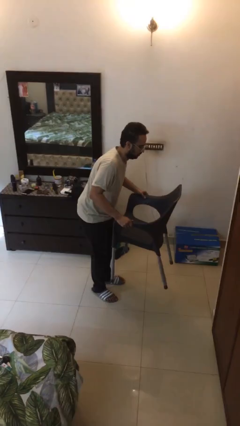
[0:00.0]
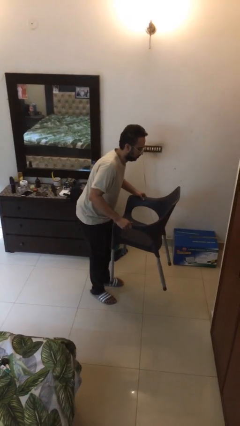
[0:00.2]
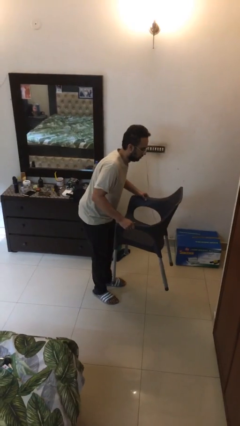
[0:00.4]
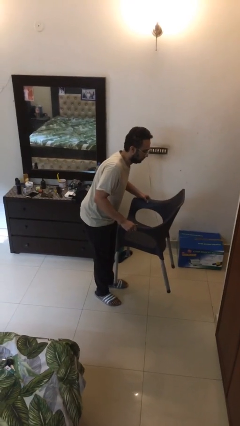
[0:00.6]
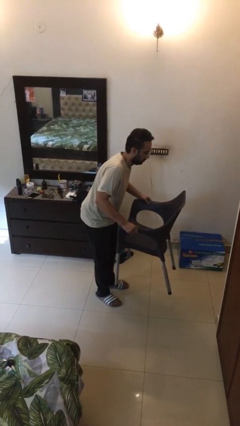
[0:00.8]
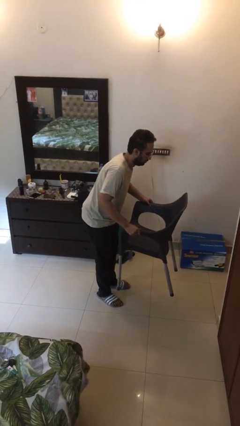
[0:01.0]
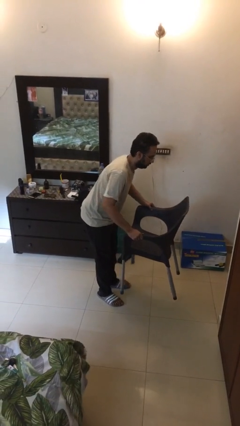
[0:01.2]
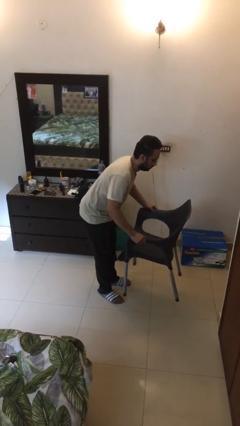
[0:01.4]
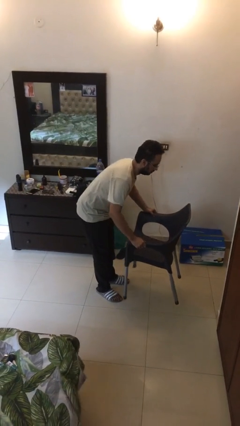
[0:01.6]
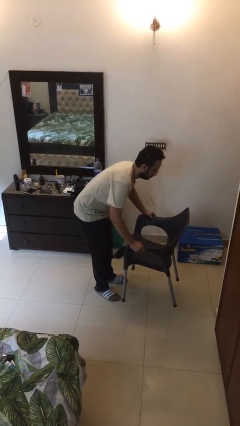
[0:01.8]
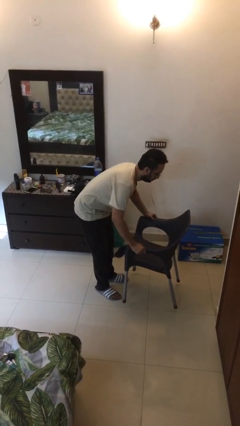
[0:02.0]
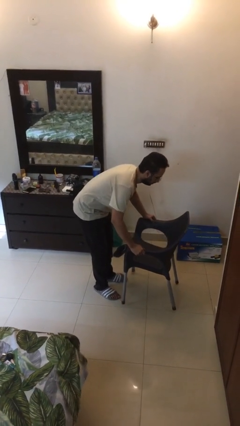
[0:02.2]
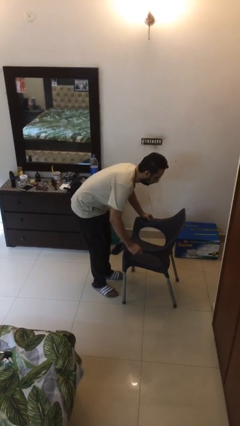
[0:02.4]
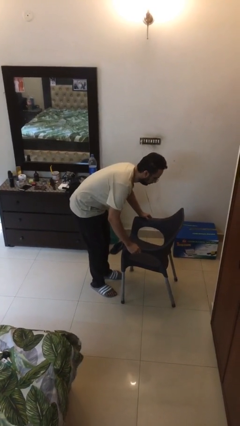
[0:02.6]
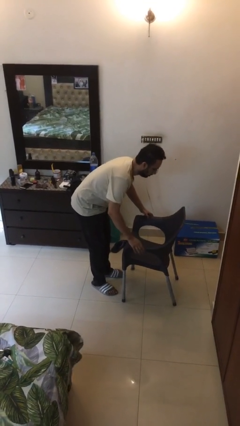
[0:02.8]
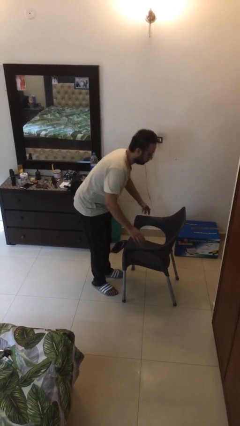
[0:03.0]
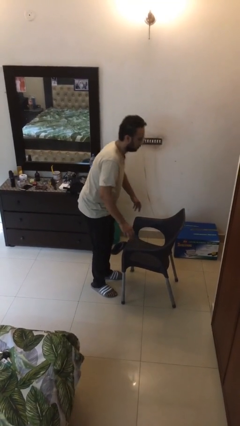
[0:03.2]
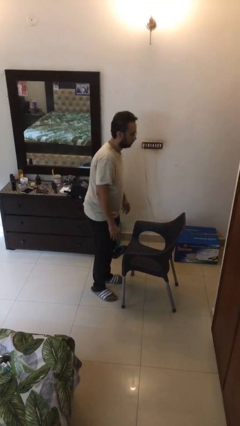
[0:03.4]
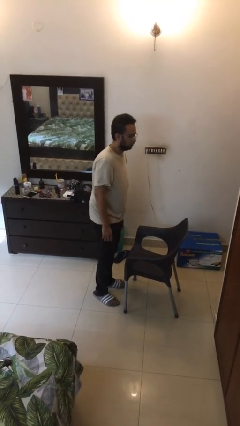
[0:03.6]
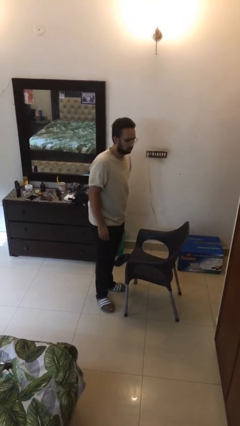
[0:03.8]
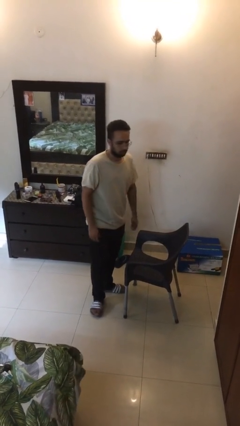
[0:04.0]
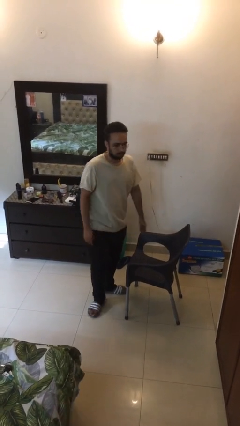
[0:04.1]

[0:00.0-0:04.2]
person puts down object on floor

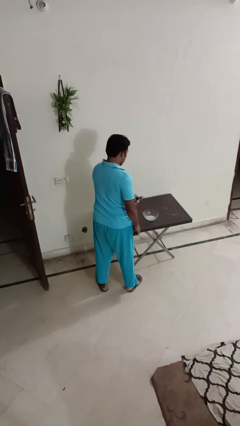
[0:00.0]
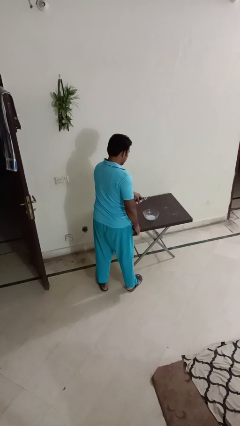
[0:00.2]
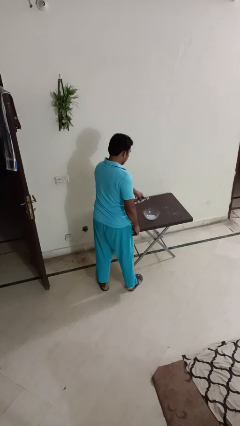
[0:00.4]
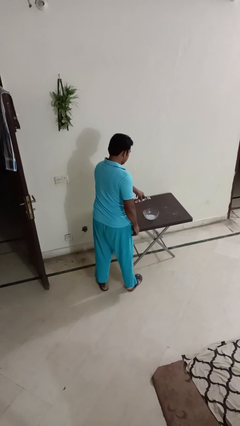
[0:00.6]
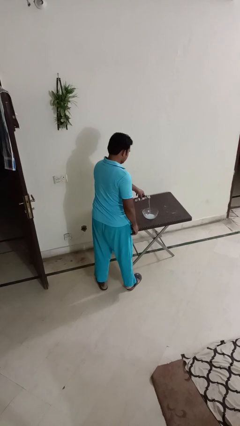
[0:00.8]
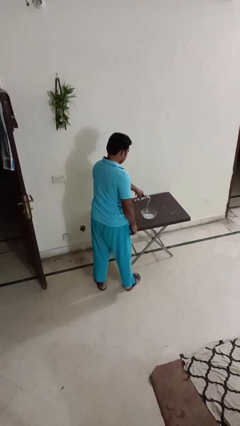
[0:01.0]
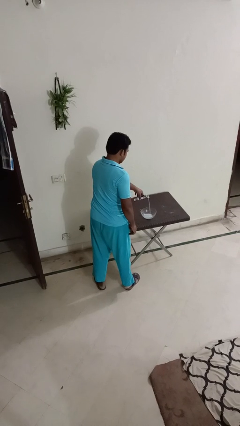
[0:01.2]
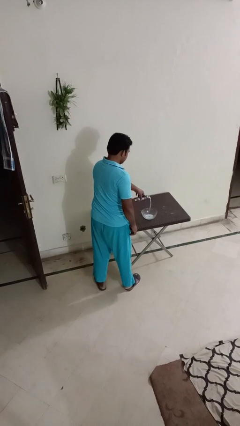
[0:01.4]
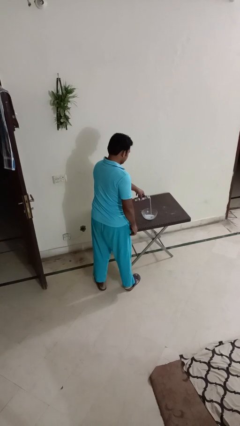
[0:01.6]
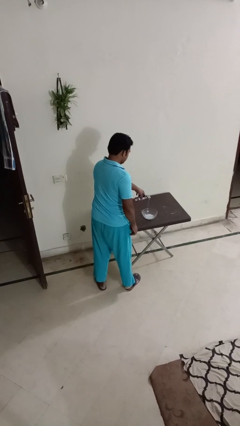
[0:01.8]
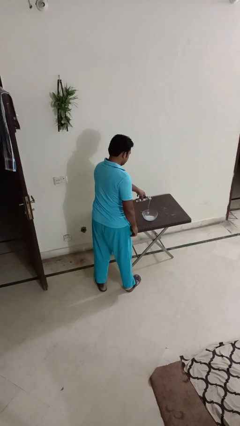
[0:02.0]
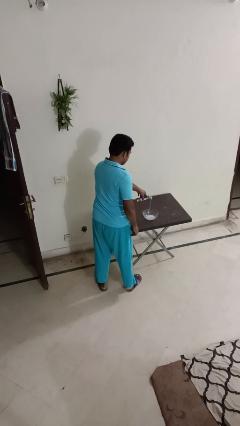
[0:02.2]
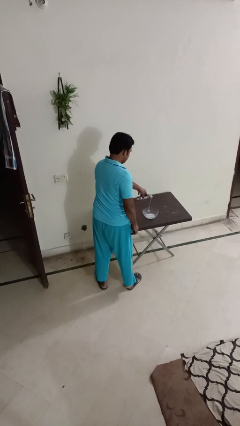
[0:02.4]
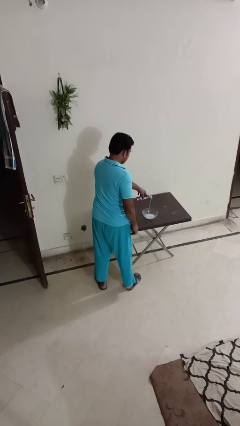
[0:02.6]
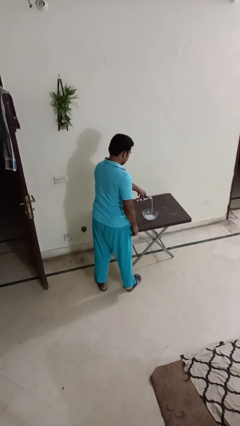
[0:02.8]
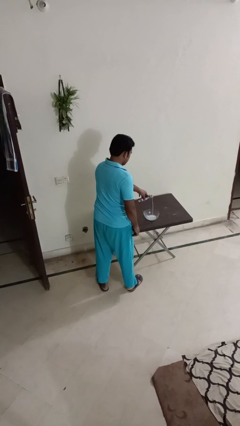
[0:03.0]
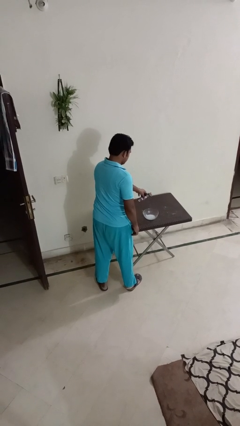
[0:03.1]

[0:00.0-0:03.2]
person pours into bowl

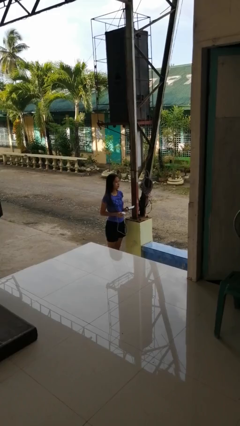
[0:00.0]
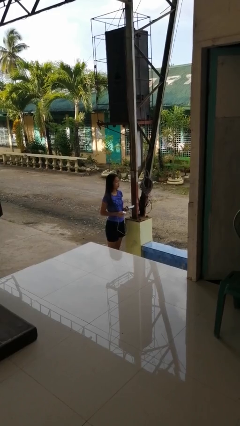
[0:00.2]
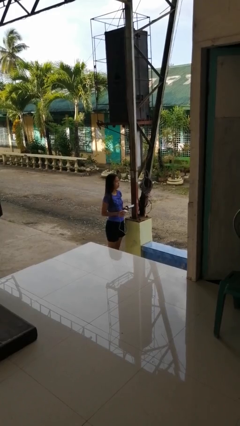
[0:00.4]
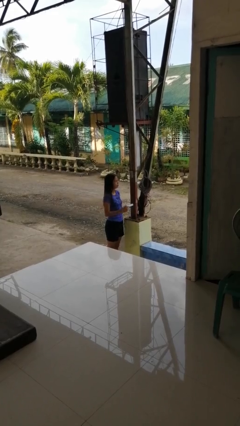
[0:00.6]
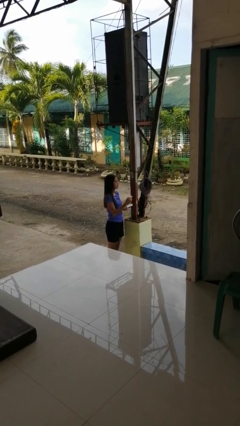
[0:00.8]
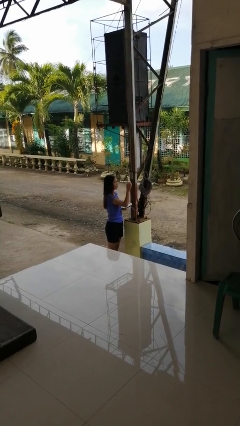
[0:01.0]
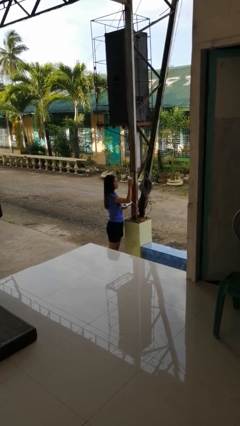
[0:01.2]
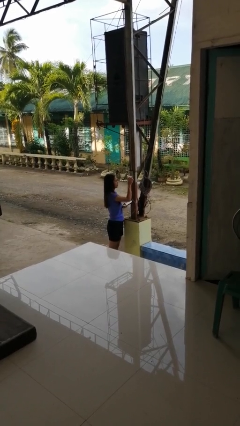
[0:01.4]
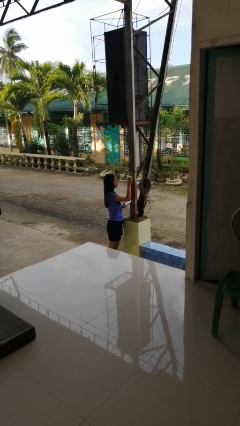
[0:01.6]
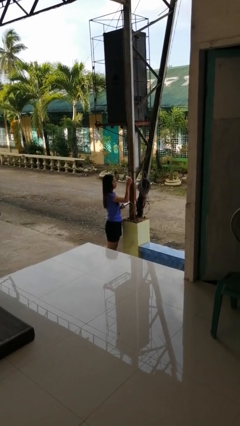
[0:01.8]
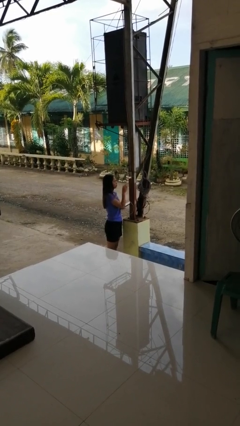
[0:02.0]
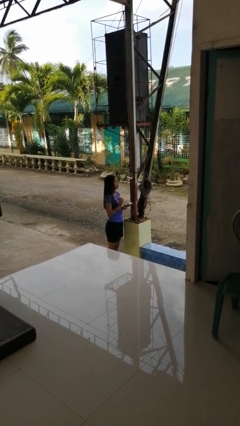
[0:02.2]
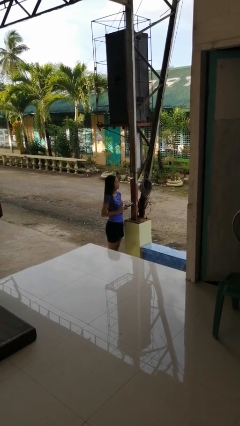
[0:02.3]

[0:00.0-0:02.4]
person plugs into electrical socket

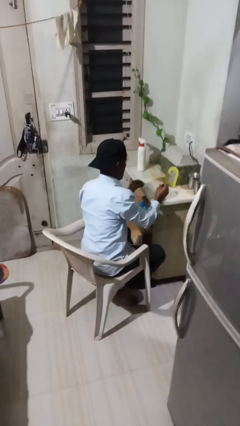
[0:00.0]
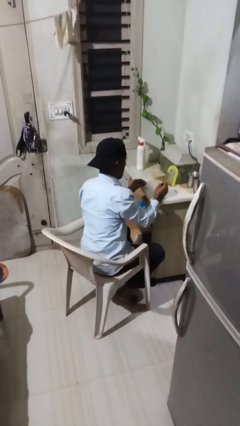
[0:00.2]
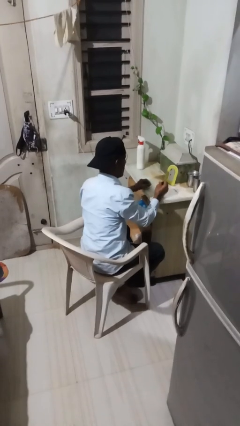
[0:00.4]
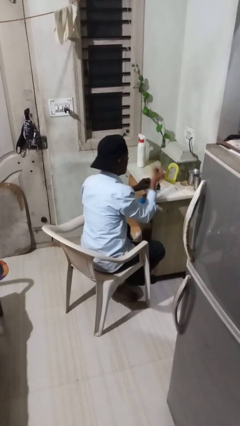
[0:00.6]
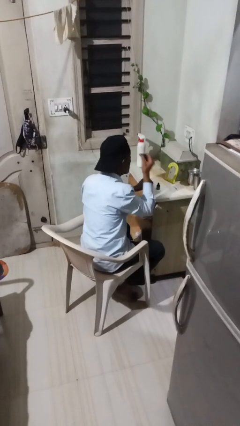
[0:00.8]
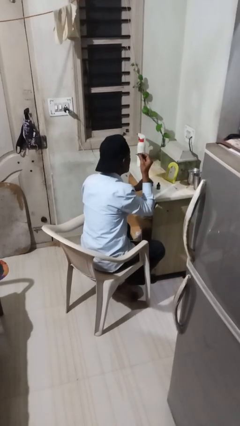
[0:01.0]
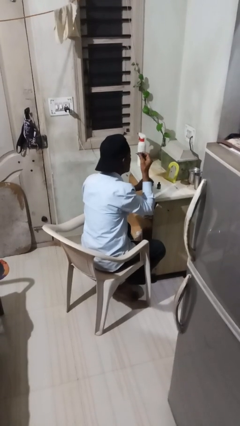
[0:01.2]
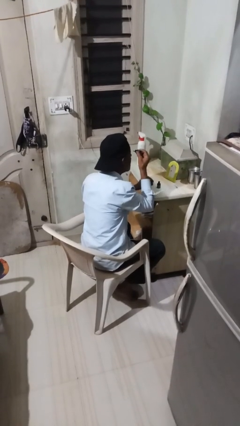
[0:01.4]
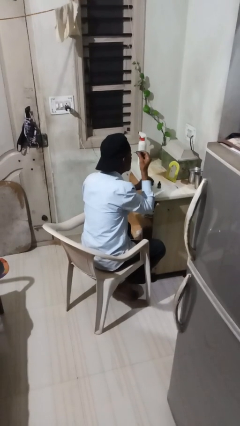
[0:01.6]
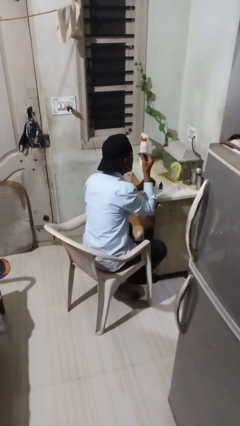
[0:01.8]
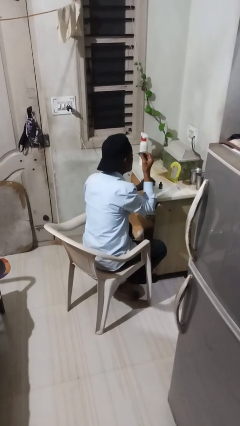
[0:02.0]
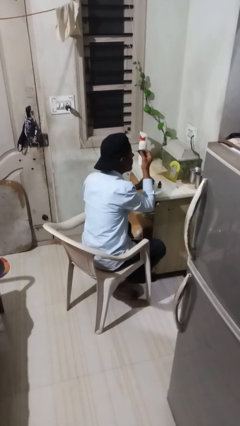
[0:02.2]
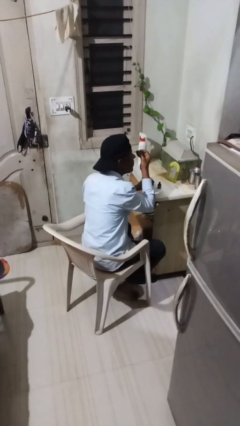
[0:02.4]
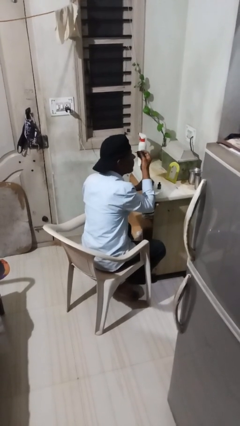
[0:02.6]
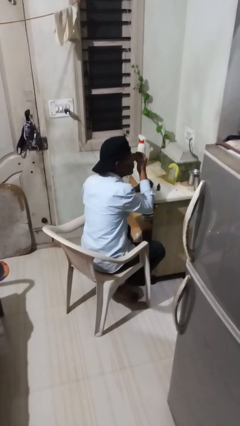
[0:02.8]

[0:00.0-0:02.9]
person applies eye makeup

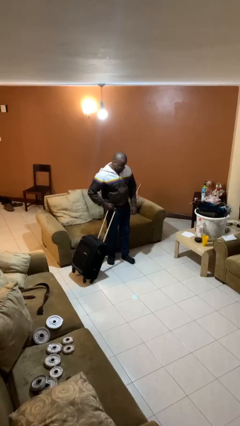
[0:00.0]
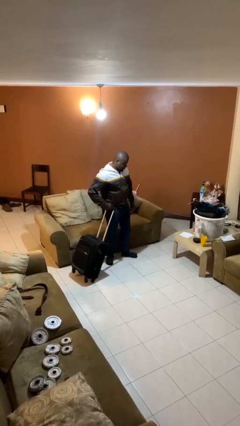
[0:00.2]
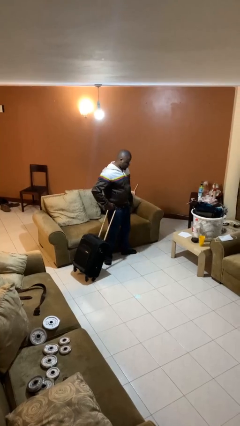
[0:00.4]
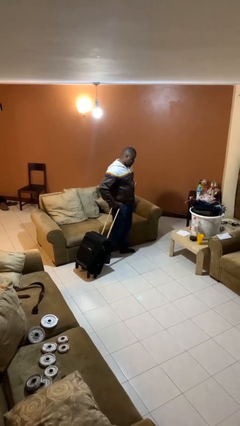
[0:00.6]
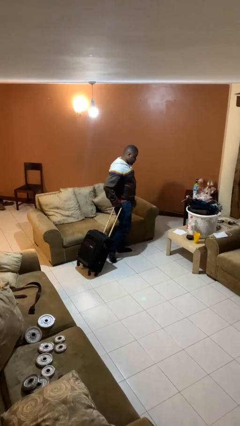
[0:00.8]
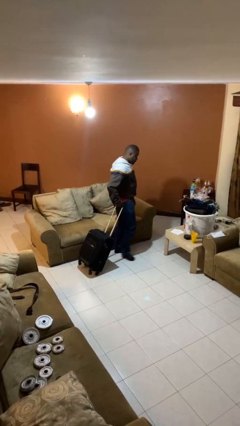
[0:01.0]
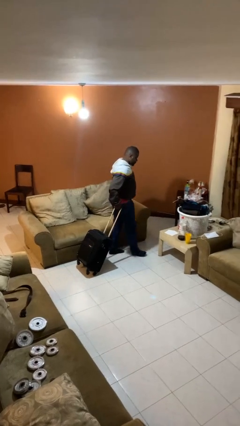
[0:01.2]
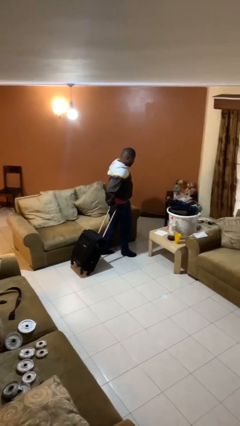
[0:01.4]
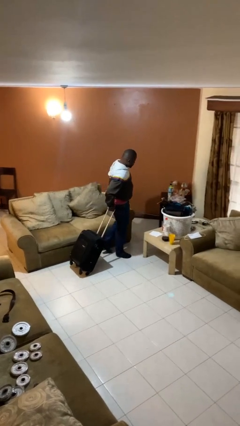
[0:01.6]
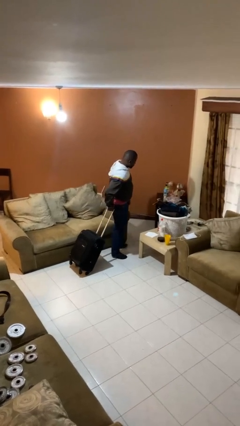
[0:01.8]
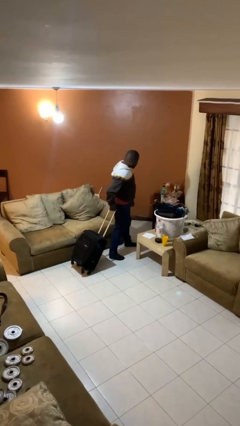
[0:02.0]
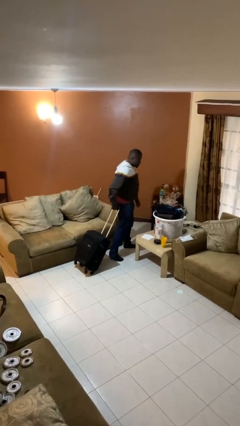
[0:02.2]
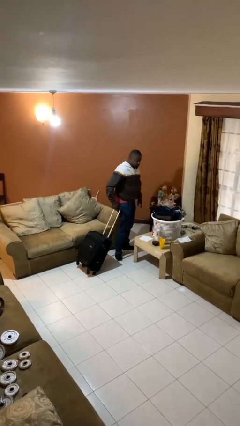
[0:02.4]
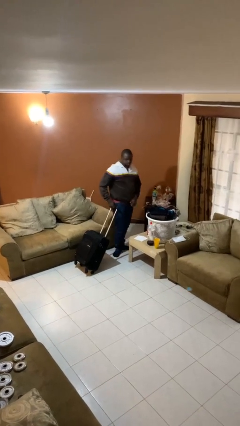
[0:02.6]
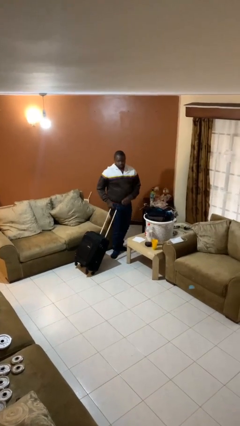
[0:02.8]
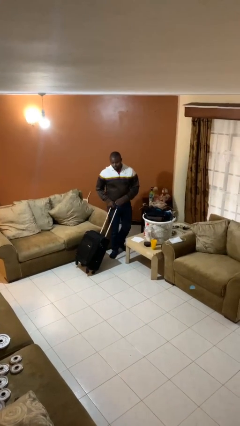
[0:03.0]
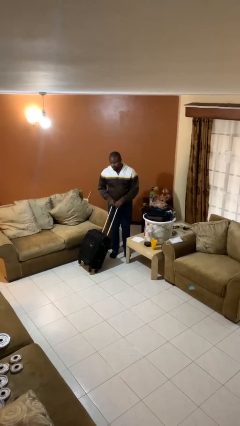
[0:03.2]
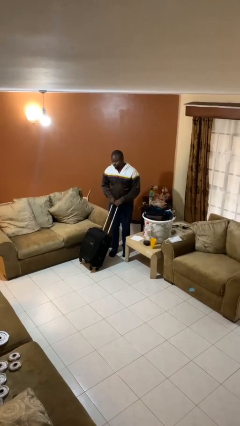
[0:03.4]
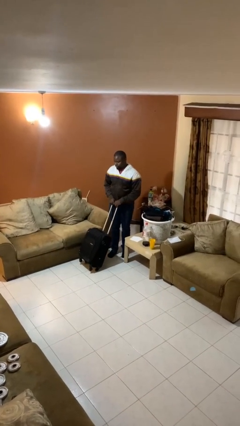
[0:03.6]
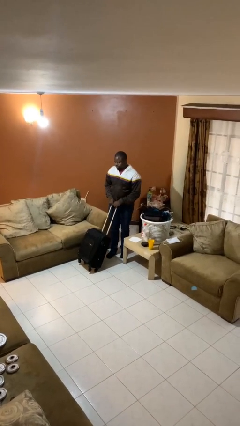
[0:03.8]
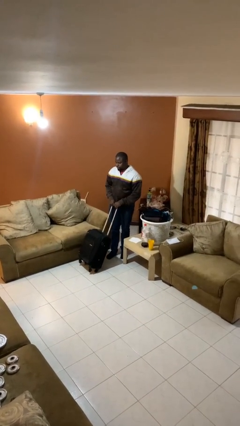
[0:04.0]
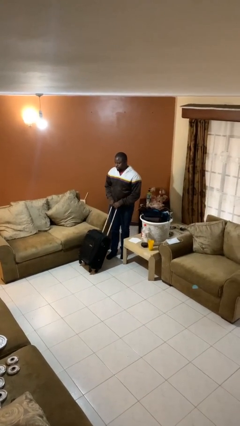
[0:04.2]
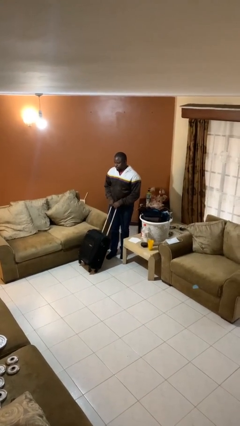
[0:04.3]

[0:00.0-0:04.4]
person pulls wheeled cart

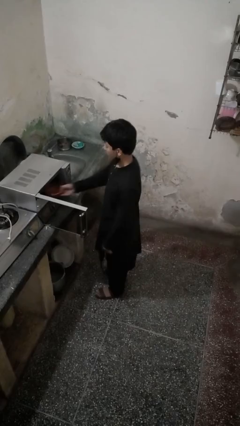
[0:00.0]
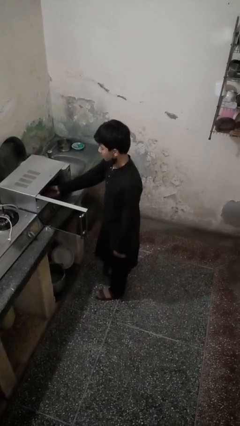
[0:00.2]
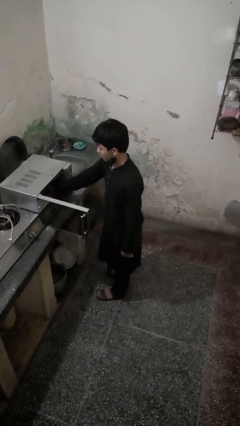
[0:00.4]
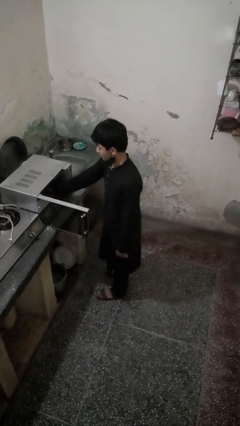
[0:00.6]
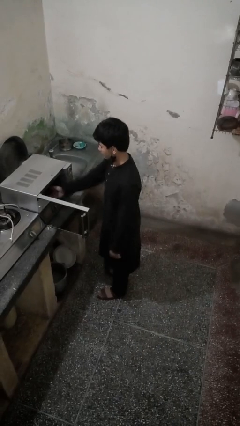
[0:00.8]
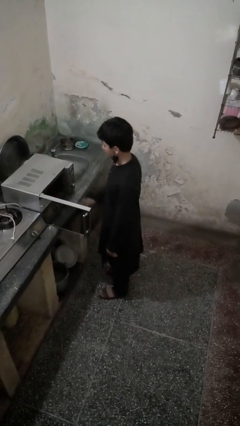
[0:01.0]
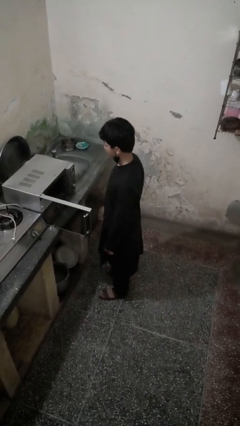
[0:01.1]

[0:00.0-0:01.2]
person puts object into microwave
